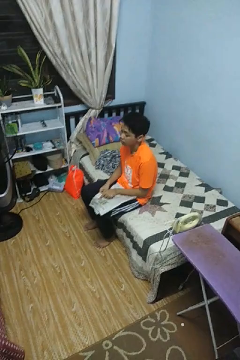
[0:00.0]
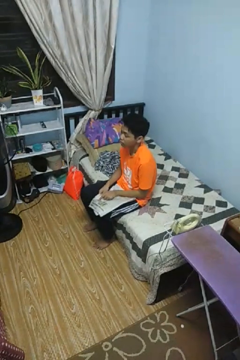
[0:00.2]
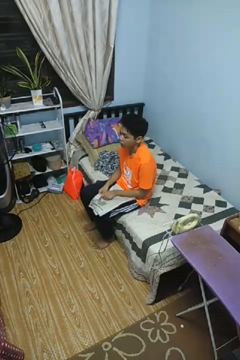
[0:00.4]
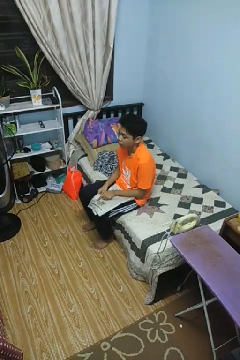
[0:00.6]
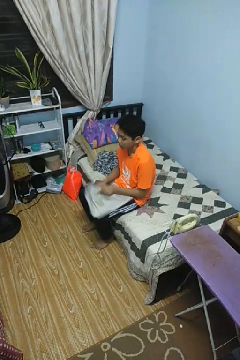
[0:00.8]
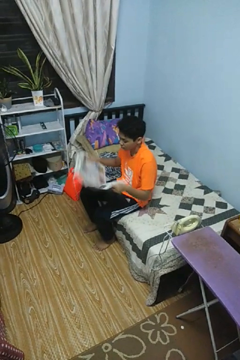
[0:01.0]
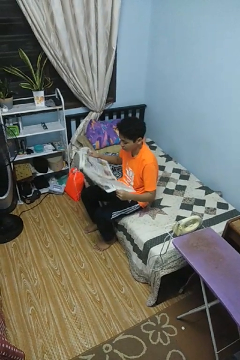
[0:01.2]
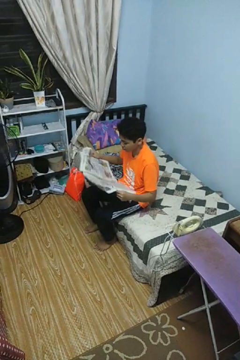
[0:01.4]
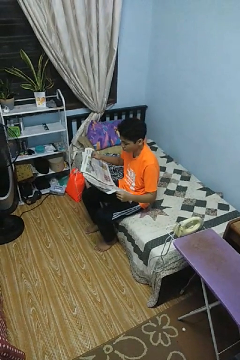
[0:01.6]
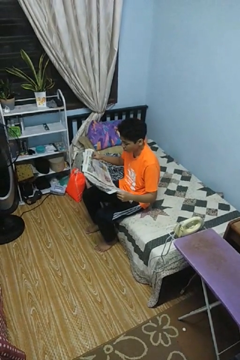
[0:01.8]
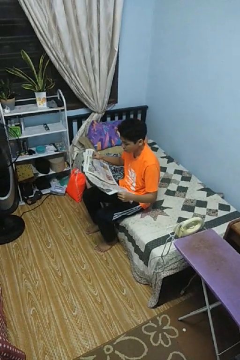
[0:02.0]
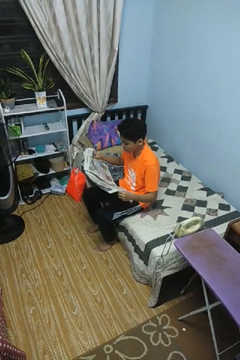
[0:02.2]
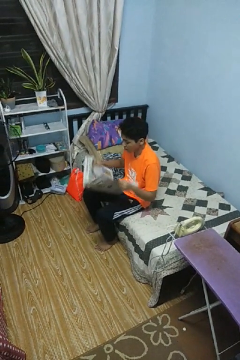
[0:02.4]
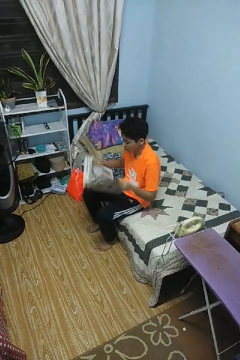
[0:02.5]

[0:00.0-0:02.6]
person reads newspaper

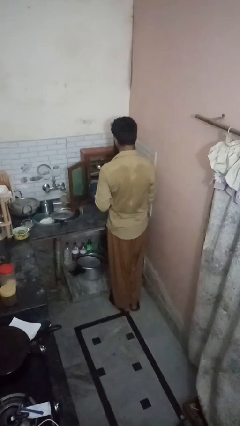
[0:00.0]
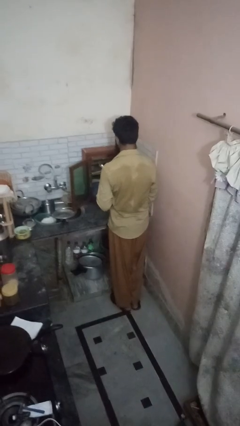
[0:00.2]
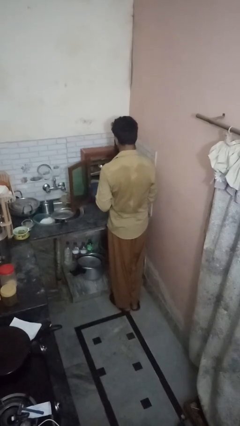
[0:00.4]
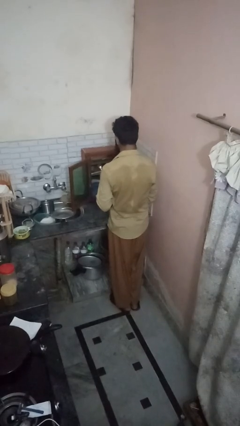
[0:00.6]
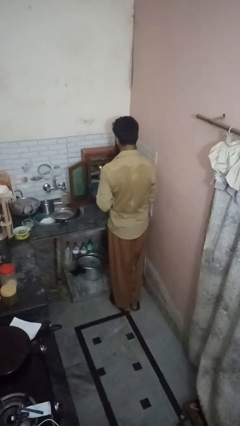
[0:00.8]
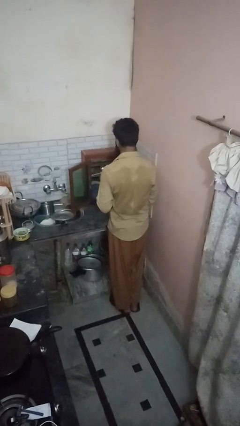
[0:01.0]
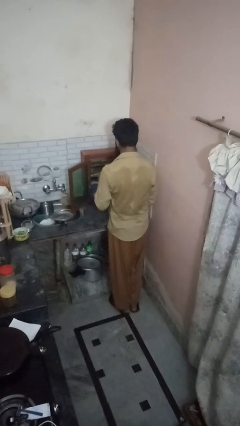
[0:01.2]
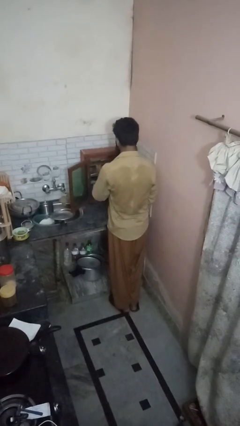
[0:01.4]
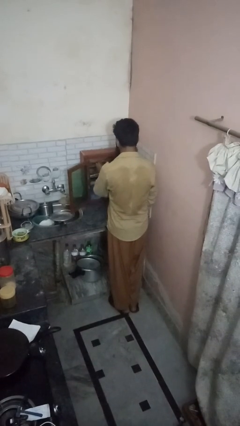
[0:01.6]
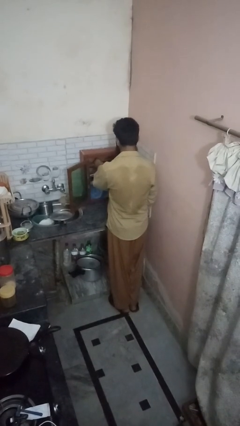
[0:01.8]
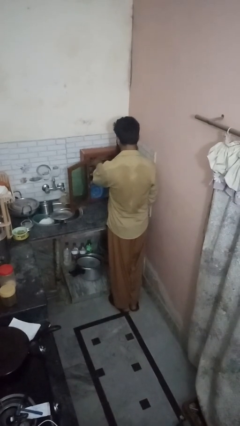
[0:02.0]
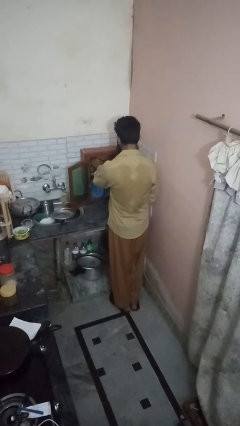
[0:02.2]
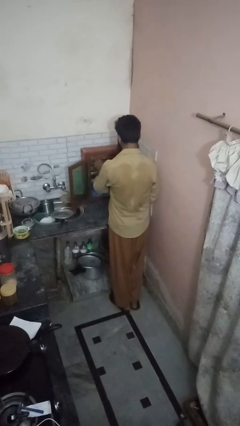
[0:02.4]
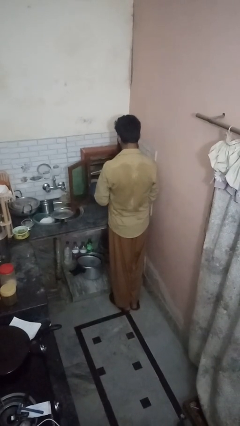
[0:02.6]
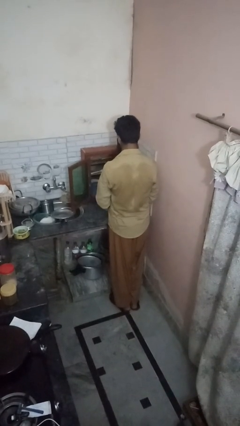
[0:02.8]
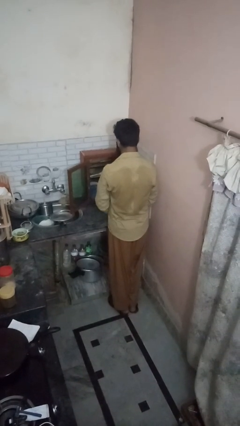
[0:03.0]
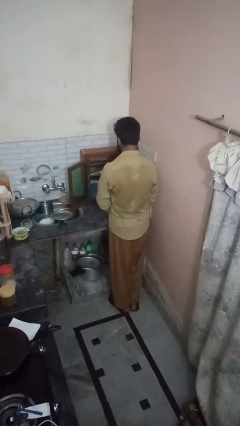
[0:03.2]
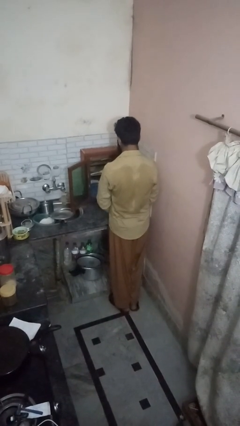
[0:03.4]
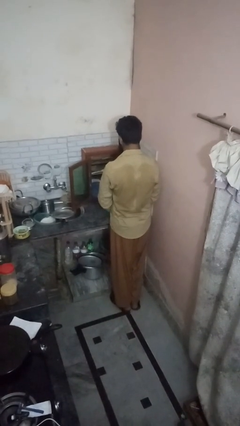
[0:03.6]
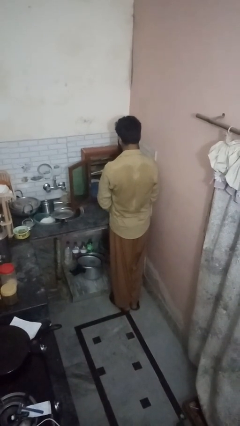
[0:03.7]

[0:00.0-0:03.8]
person takes object from cabinet

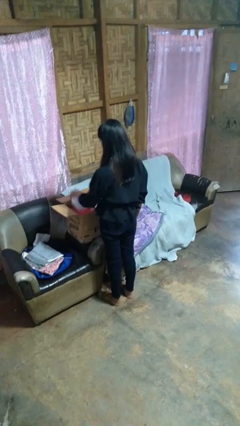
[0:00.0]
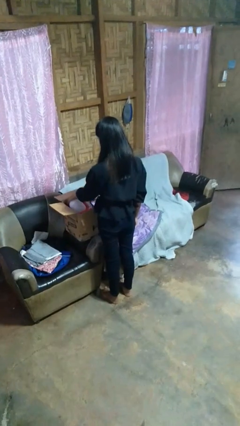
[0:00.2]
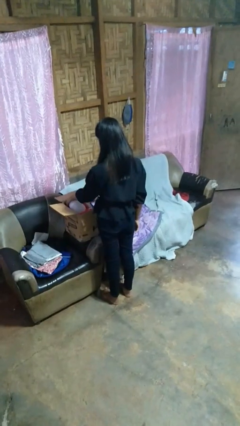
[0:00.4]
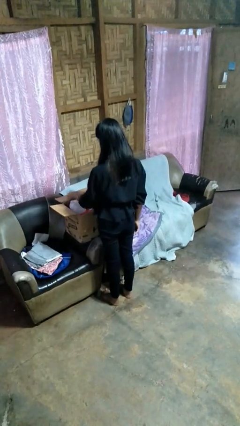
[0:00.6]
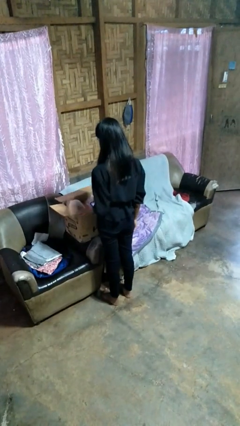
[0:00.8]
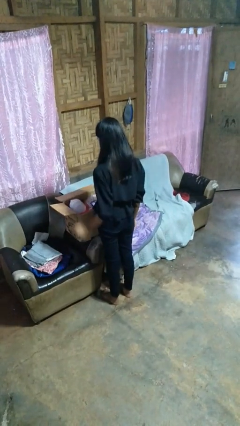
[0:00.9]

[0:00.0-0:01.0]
person puts object into box

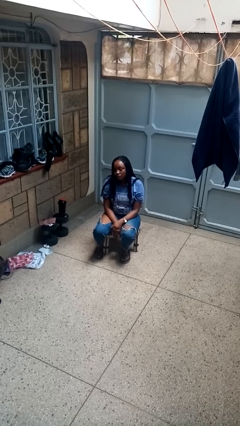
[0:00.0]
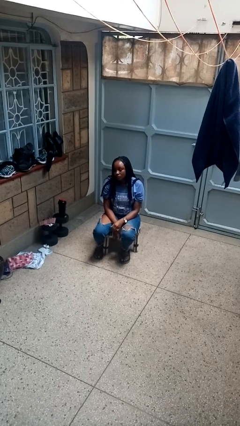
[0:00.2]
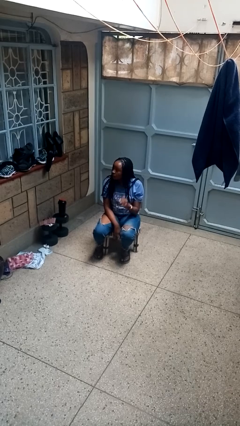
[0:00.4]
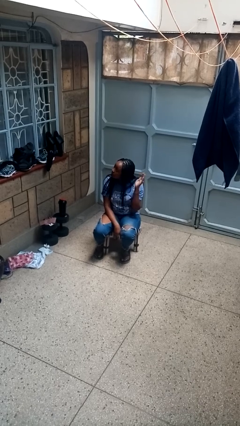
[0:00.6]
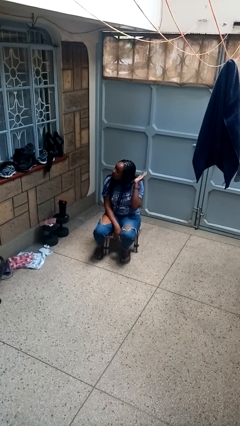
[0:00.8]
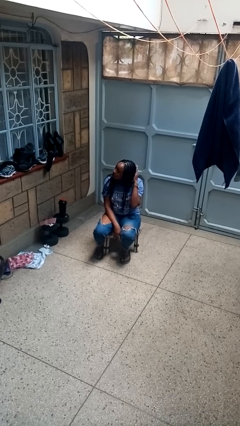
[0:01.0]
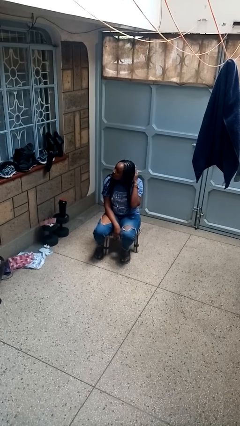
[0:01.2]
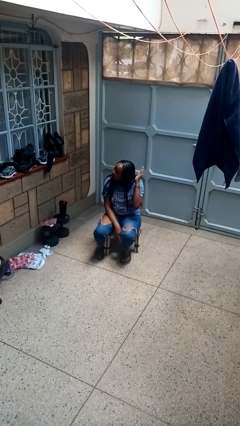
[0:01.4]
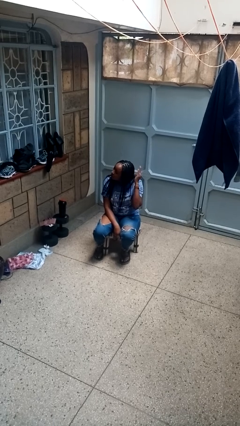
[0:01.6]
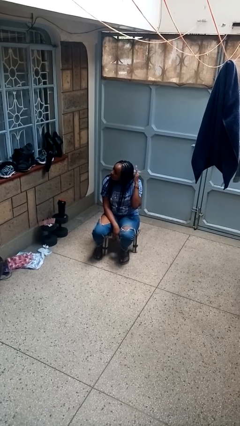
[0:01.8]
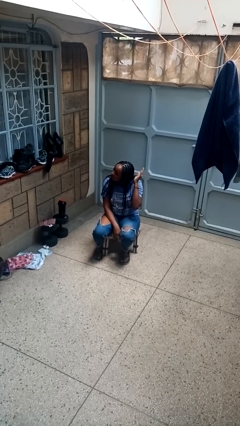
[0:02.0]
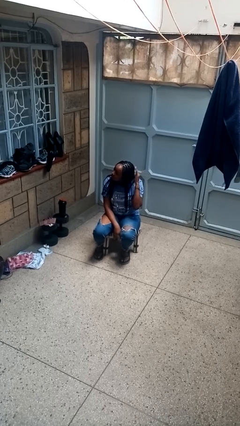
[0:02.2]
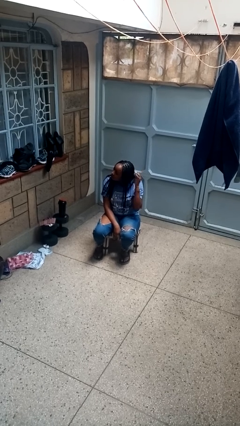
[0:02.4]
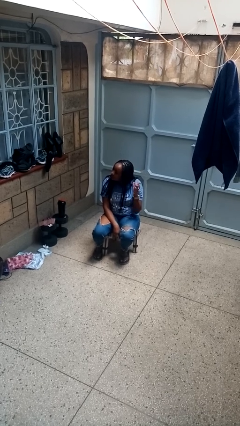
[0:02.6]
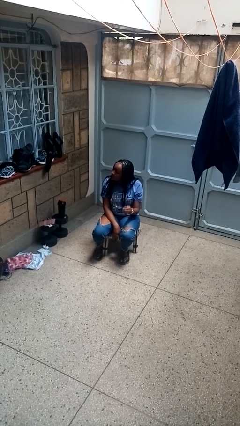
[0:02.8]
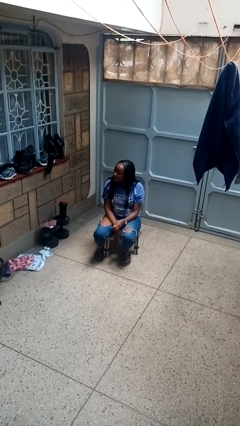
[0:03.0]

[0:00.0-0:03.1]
person pats head

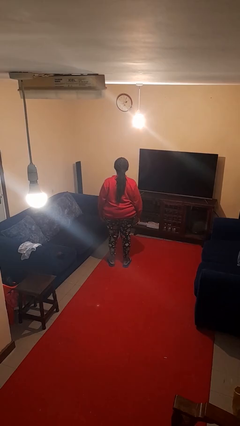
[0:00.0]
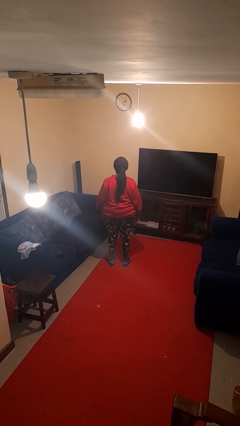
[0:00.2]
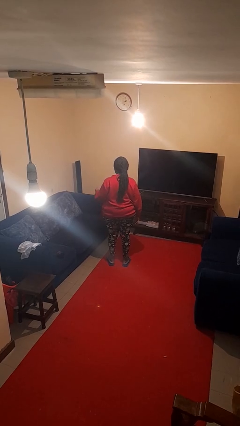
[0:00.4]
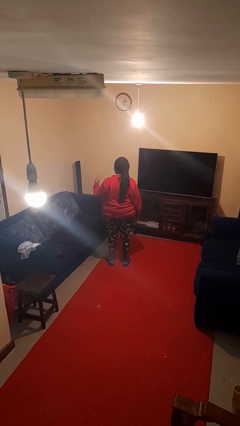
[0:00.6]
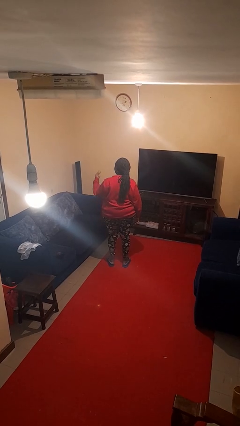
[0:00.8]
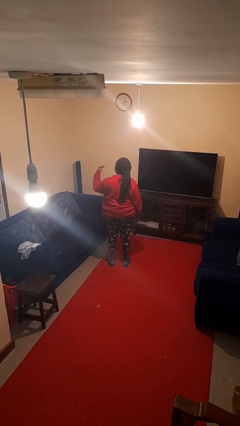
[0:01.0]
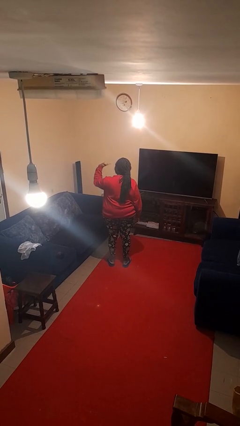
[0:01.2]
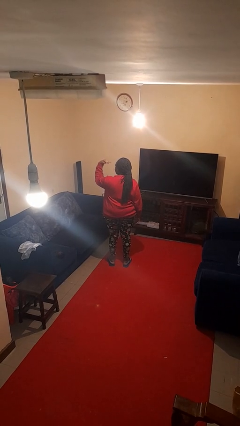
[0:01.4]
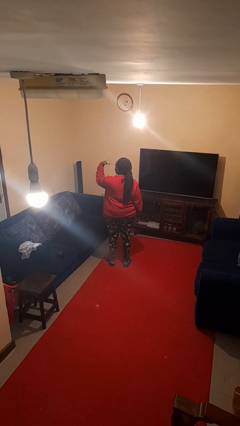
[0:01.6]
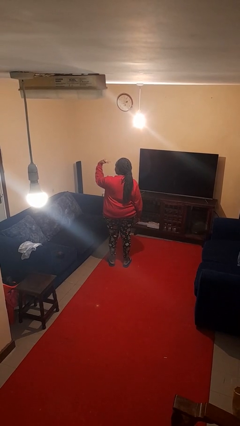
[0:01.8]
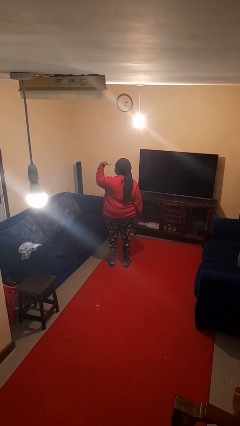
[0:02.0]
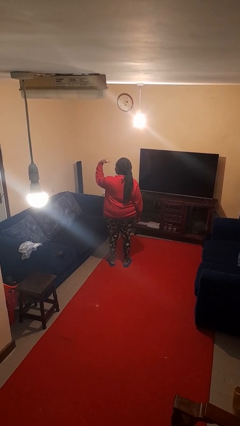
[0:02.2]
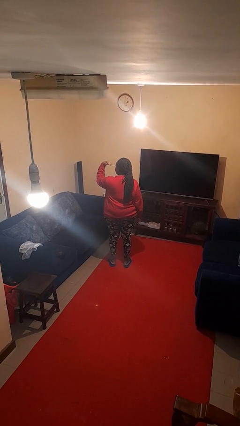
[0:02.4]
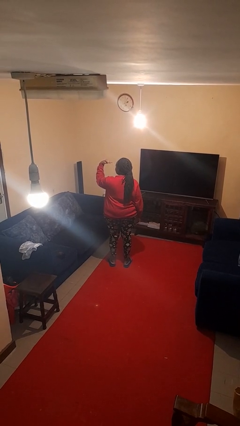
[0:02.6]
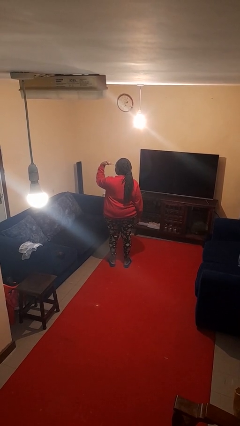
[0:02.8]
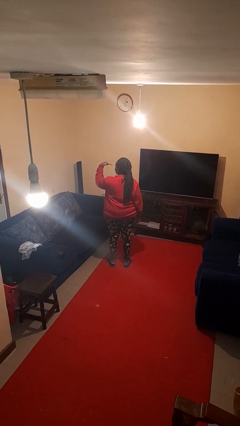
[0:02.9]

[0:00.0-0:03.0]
person gestures watch closely

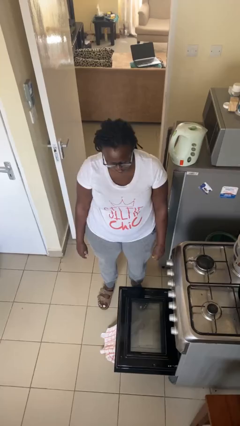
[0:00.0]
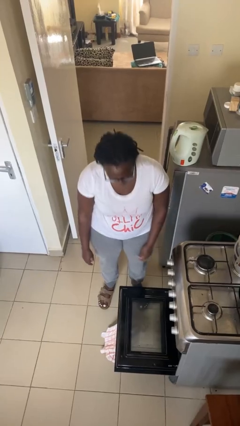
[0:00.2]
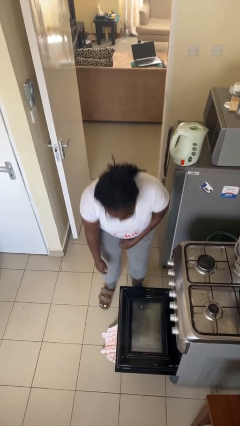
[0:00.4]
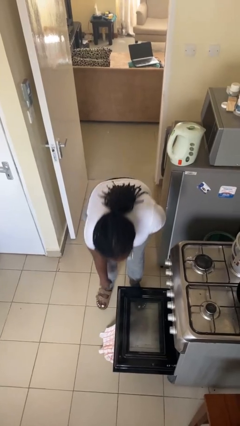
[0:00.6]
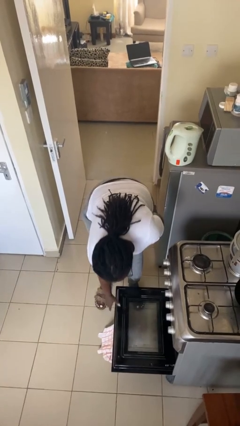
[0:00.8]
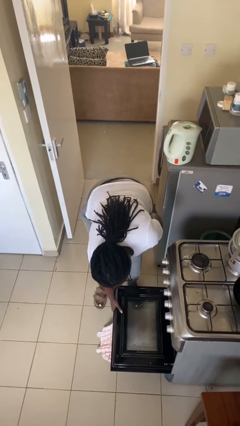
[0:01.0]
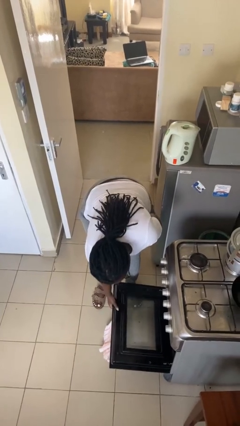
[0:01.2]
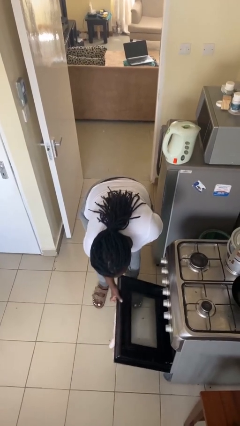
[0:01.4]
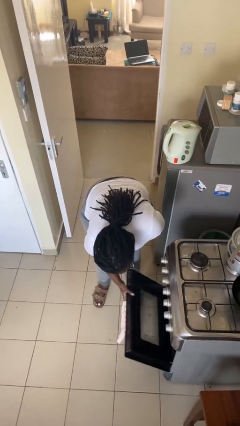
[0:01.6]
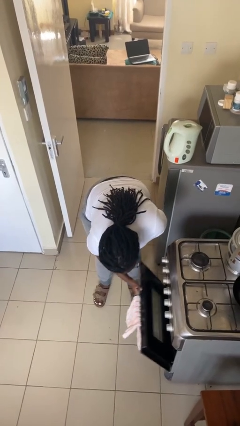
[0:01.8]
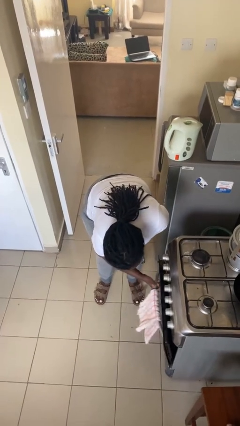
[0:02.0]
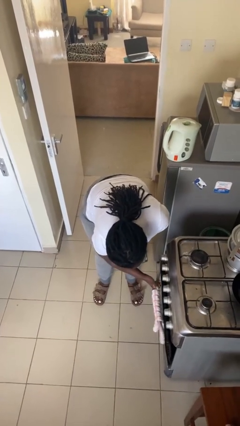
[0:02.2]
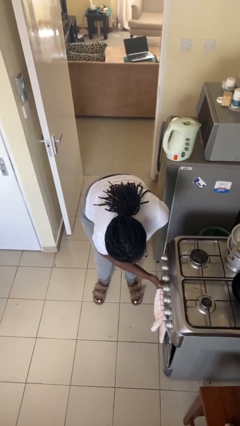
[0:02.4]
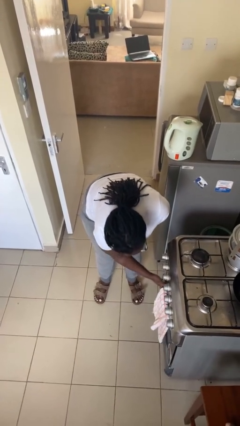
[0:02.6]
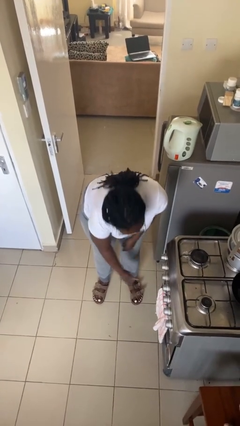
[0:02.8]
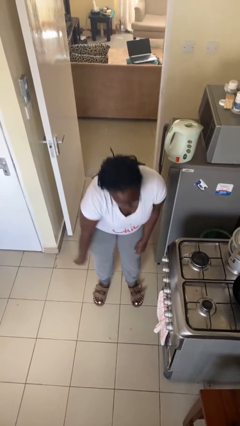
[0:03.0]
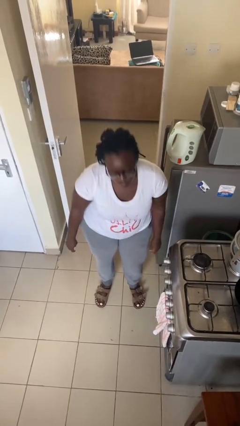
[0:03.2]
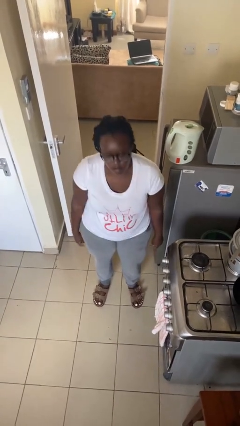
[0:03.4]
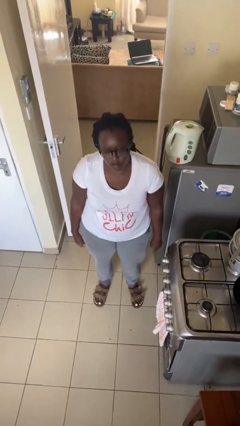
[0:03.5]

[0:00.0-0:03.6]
person closes oven door

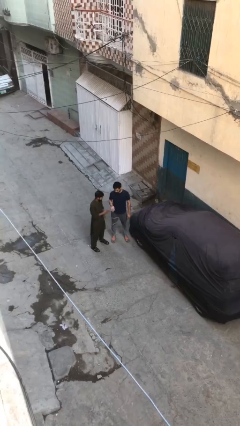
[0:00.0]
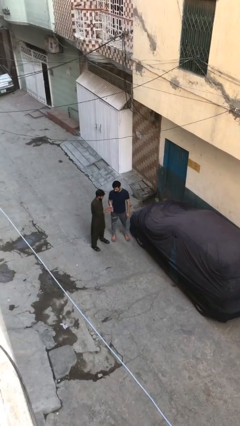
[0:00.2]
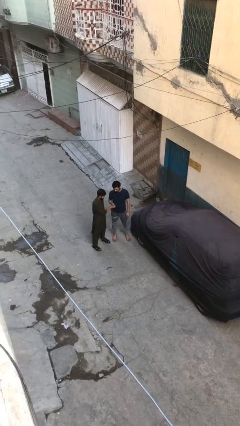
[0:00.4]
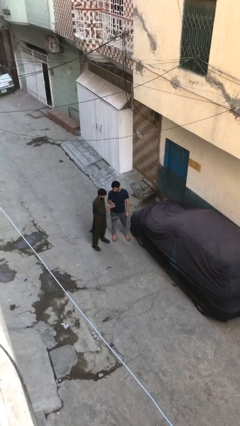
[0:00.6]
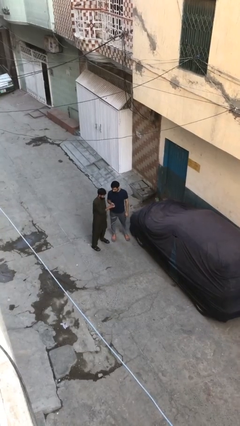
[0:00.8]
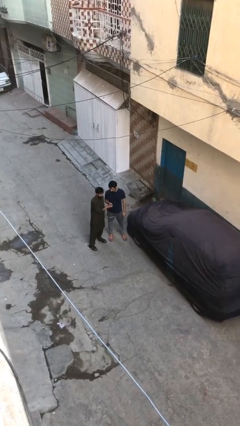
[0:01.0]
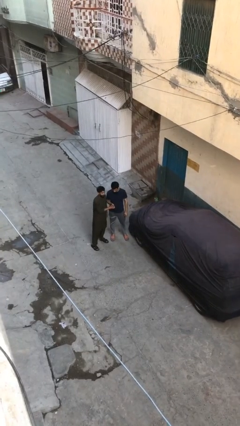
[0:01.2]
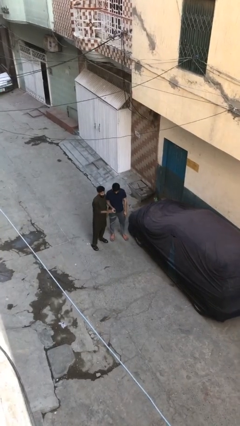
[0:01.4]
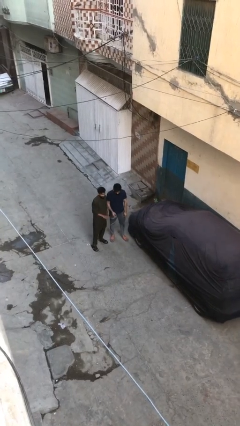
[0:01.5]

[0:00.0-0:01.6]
person shakes hand
